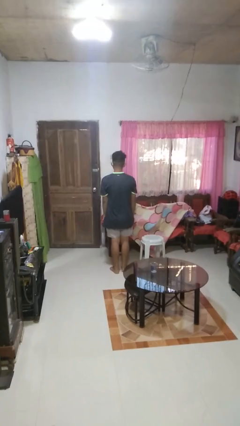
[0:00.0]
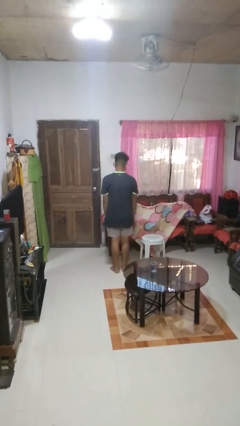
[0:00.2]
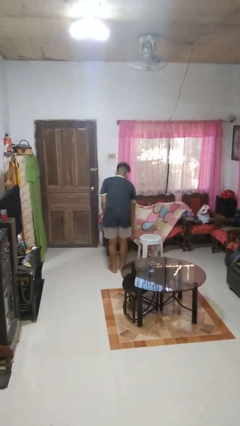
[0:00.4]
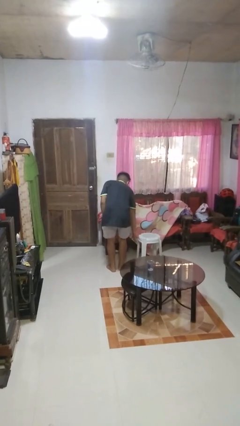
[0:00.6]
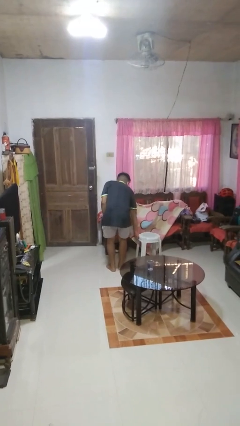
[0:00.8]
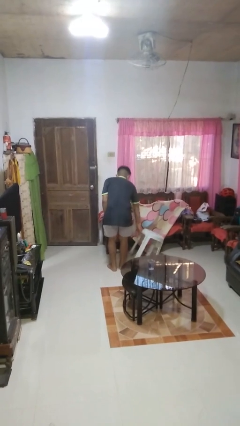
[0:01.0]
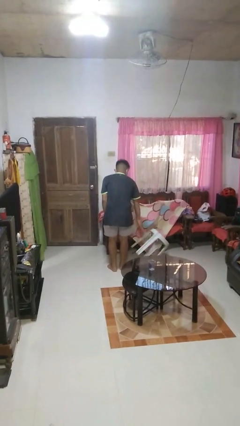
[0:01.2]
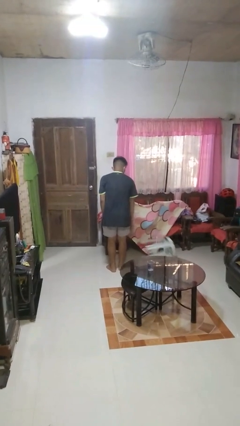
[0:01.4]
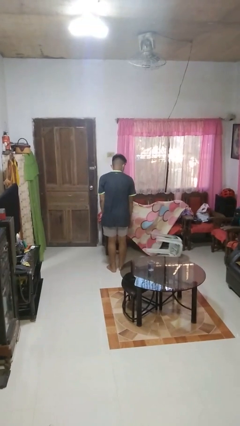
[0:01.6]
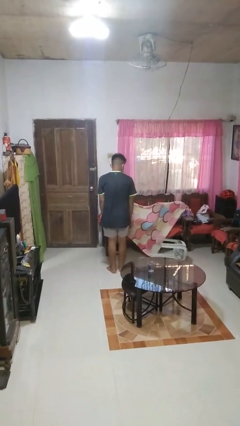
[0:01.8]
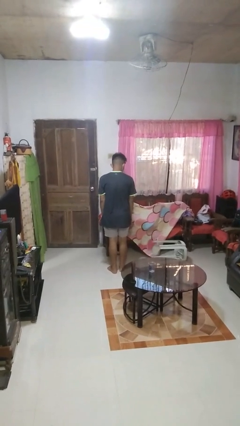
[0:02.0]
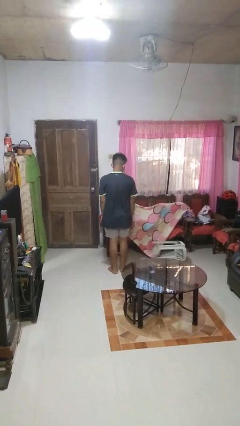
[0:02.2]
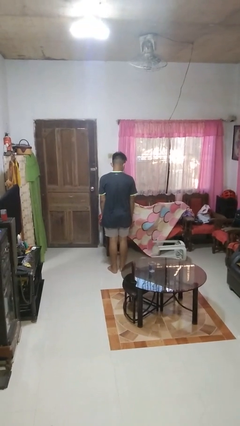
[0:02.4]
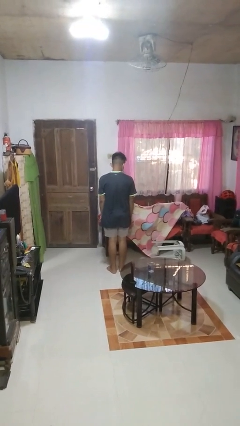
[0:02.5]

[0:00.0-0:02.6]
person knocks over furniture

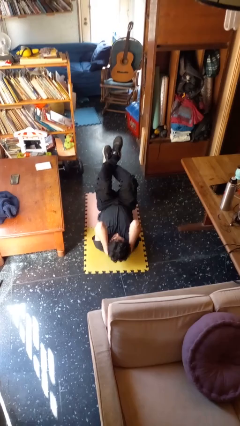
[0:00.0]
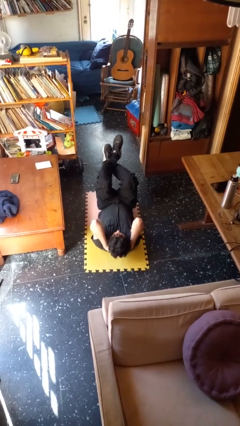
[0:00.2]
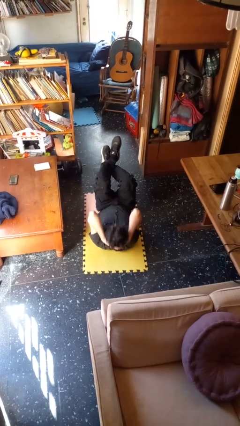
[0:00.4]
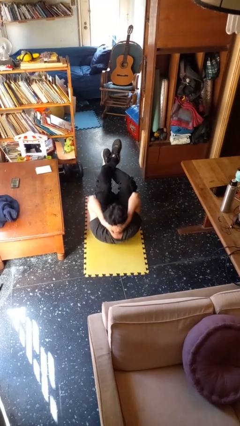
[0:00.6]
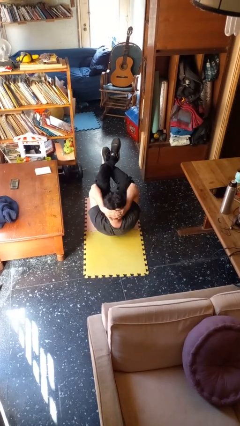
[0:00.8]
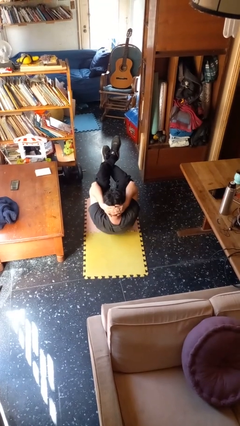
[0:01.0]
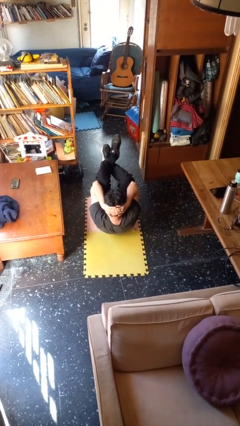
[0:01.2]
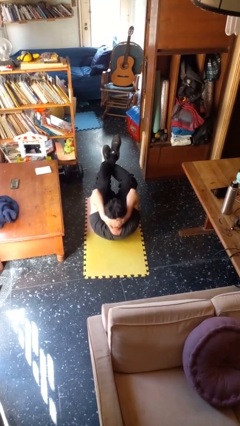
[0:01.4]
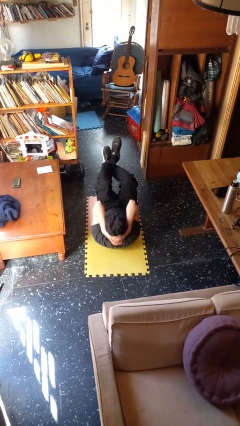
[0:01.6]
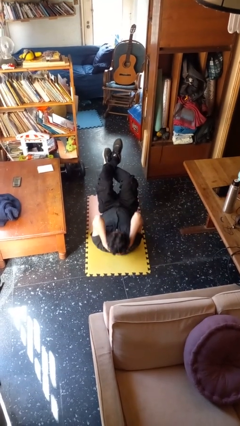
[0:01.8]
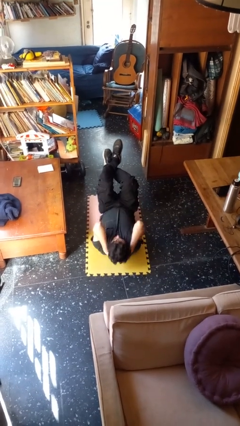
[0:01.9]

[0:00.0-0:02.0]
person exercises with situp

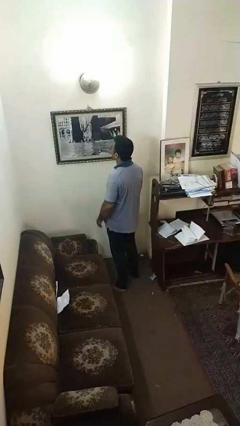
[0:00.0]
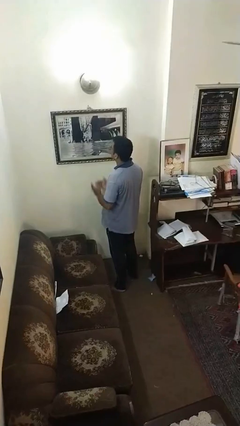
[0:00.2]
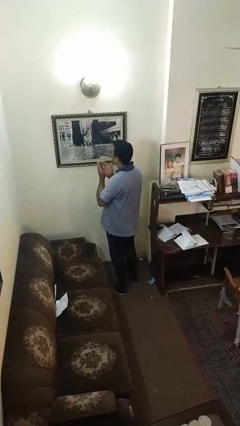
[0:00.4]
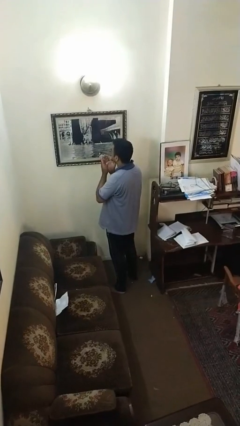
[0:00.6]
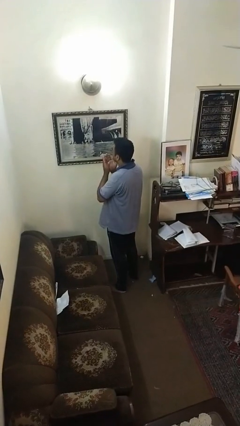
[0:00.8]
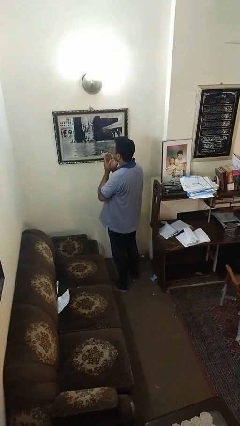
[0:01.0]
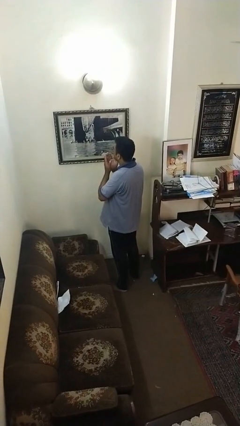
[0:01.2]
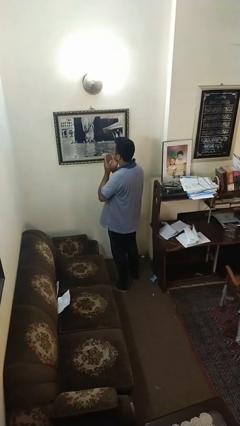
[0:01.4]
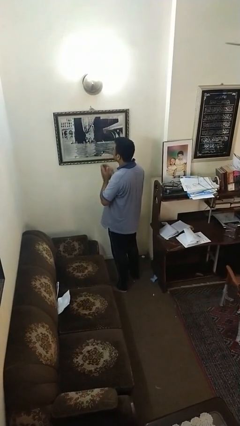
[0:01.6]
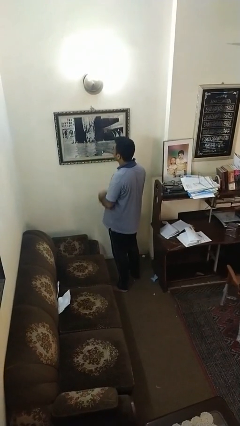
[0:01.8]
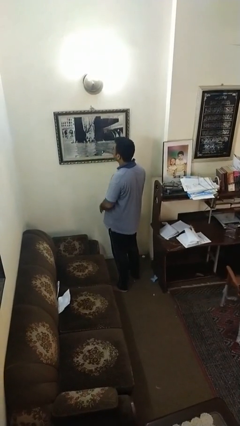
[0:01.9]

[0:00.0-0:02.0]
person prays

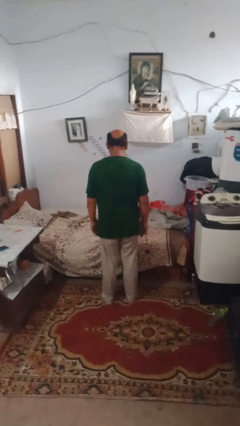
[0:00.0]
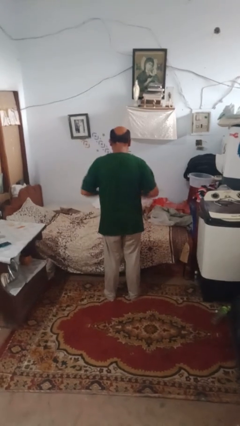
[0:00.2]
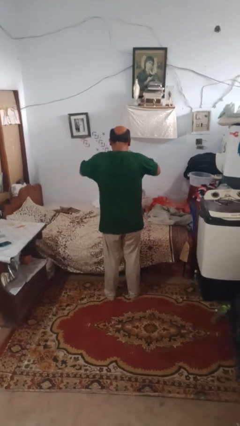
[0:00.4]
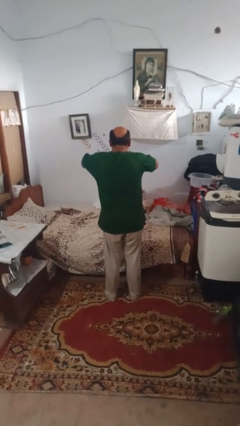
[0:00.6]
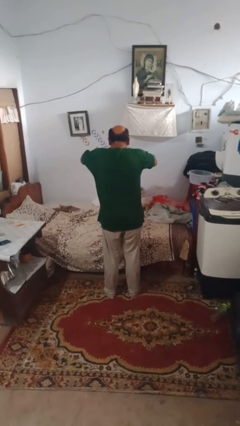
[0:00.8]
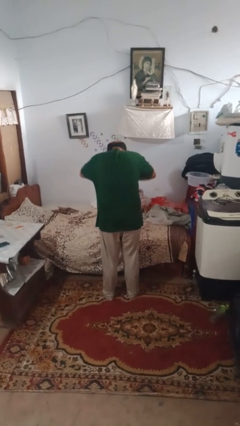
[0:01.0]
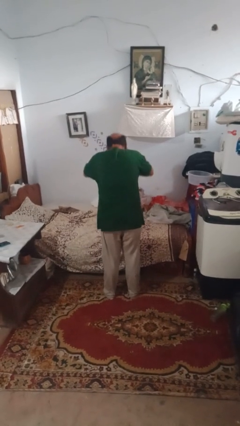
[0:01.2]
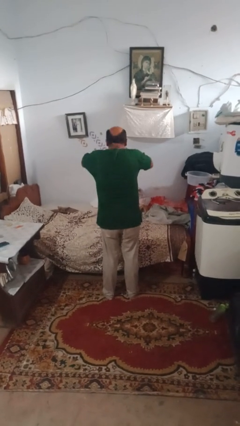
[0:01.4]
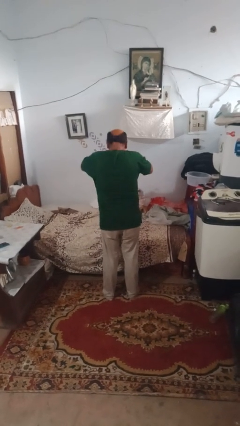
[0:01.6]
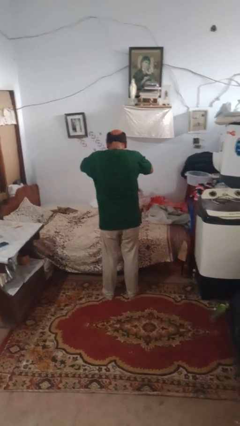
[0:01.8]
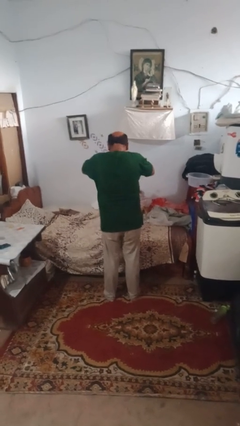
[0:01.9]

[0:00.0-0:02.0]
person sneezes into hand

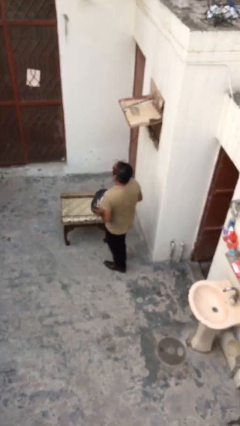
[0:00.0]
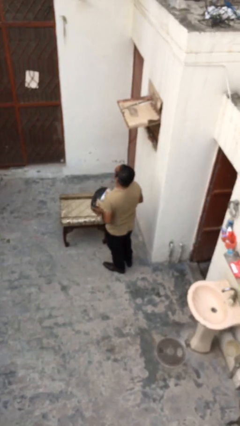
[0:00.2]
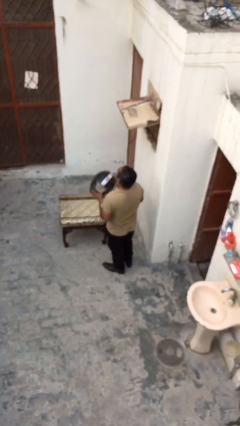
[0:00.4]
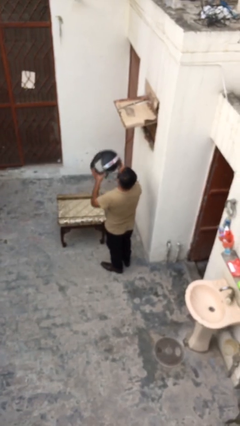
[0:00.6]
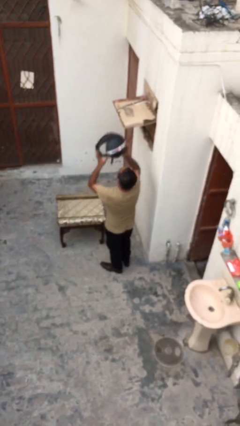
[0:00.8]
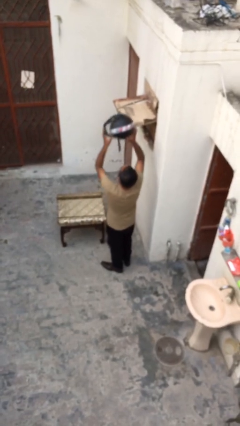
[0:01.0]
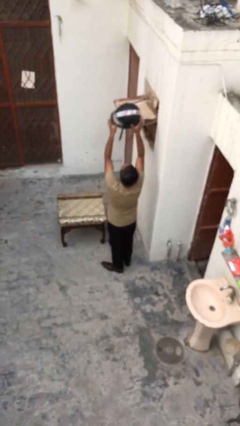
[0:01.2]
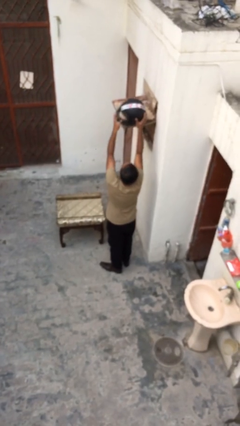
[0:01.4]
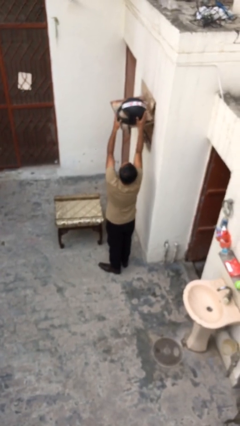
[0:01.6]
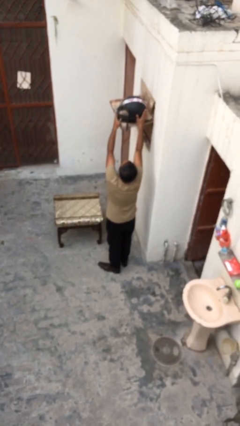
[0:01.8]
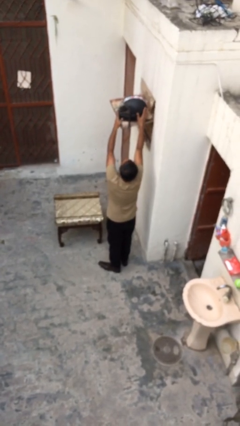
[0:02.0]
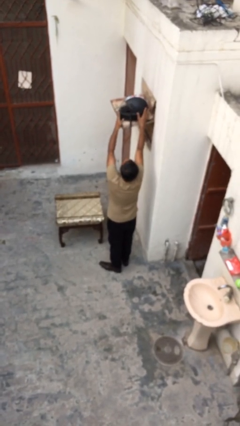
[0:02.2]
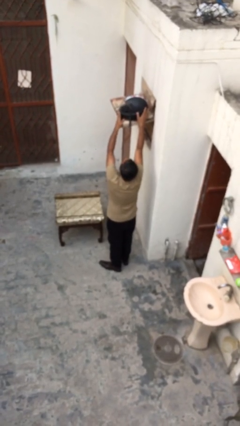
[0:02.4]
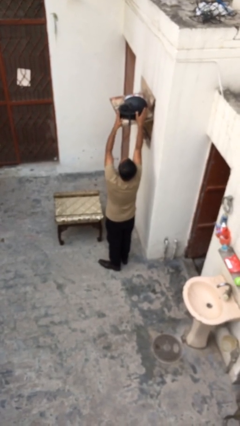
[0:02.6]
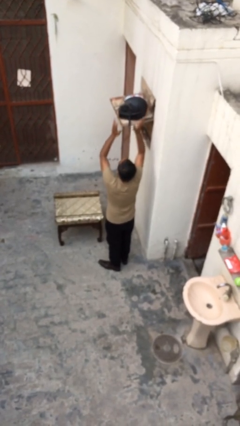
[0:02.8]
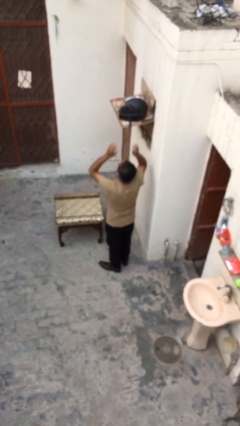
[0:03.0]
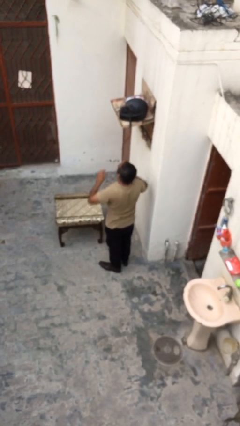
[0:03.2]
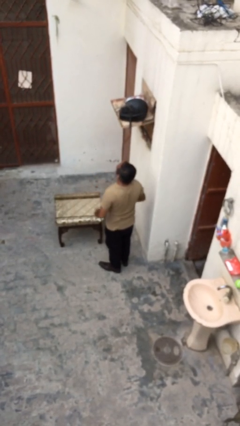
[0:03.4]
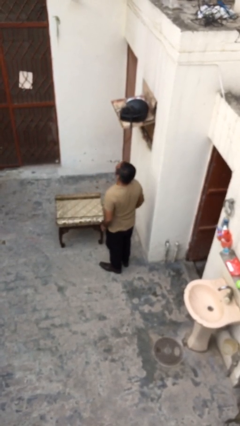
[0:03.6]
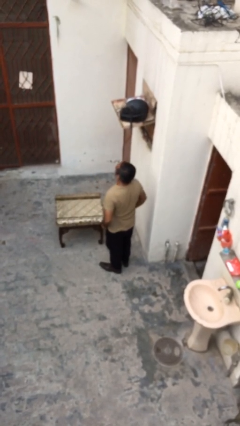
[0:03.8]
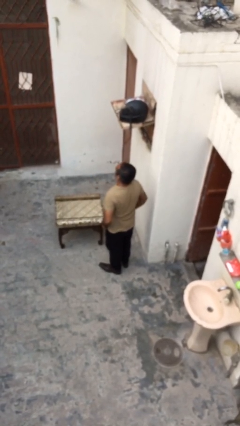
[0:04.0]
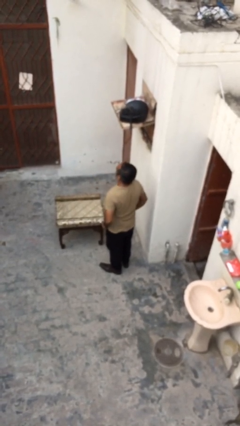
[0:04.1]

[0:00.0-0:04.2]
person puts down object on shelf

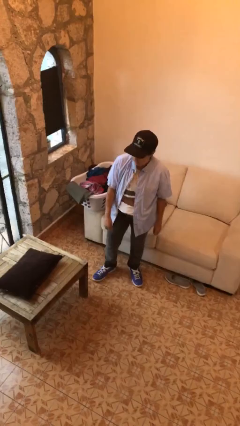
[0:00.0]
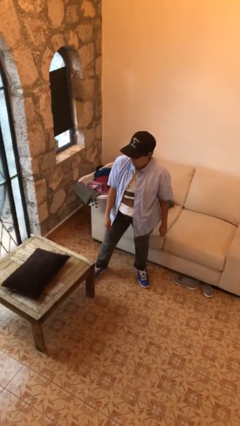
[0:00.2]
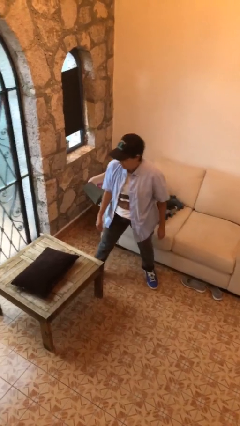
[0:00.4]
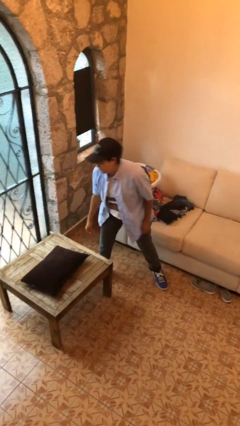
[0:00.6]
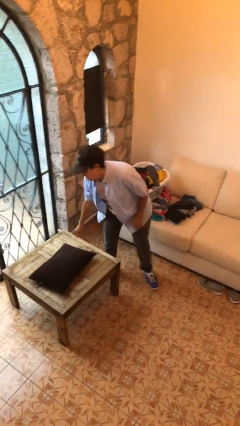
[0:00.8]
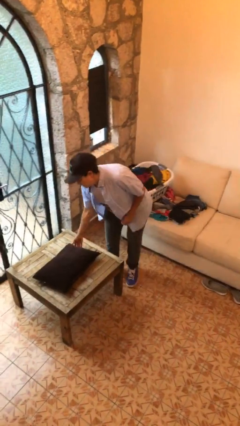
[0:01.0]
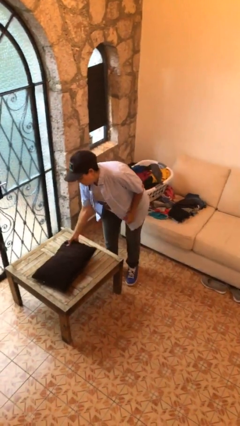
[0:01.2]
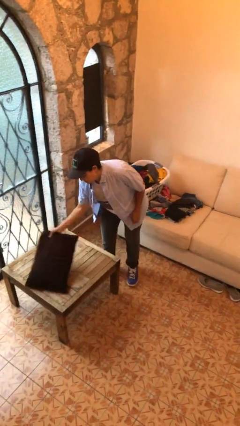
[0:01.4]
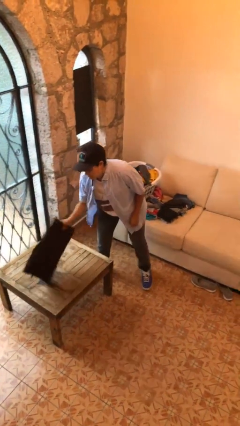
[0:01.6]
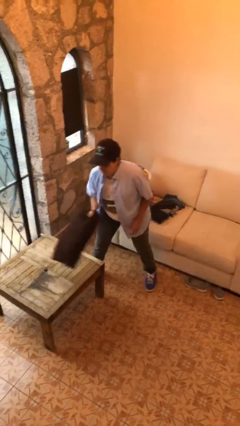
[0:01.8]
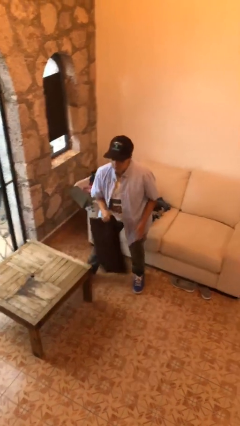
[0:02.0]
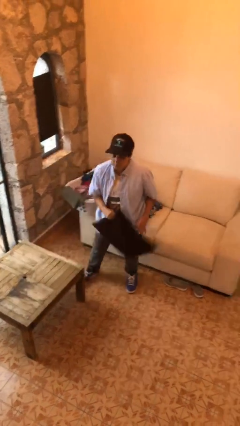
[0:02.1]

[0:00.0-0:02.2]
person picks up object from table

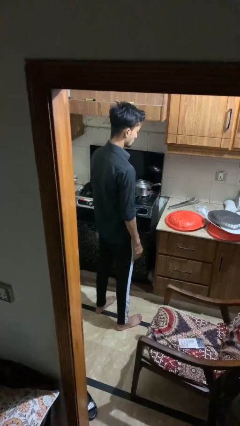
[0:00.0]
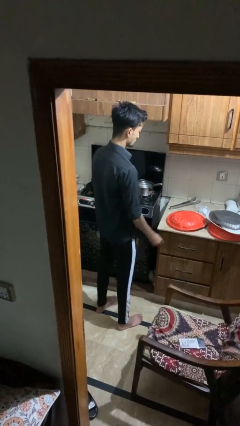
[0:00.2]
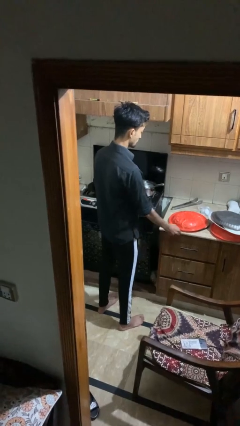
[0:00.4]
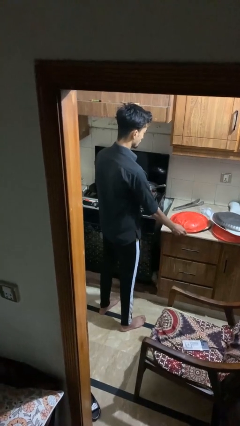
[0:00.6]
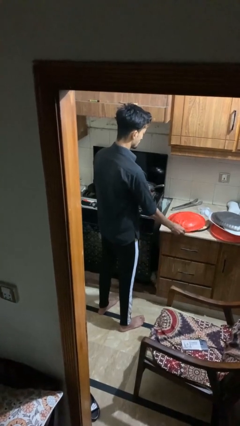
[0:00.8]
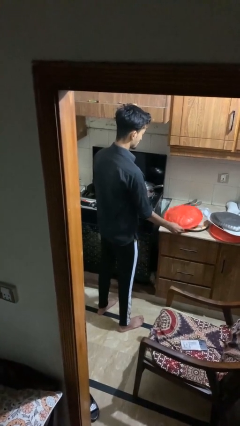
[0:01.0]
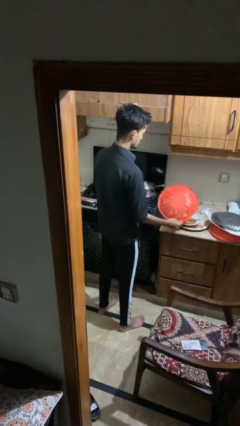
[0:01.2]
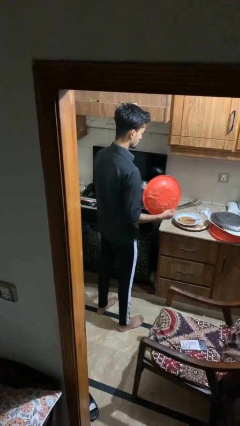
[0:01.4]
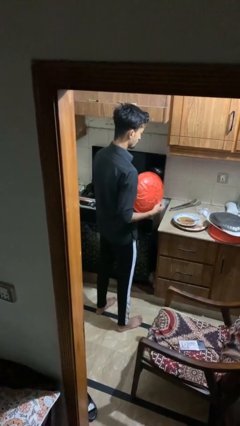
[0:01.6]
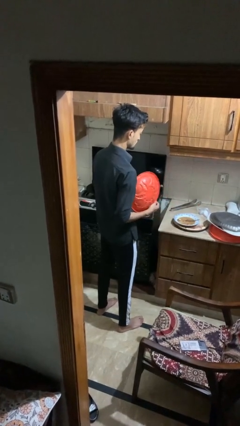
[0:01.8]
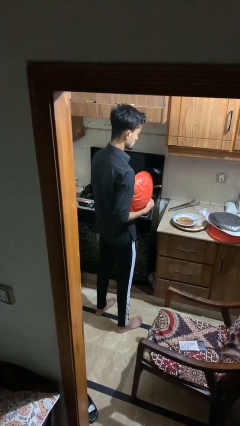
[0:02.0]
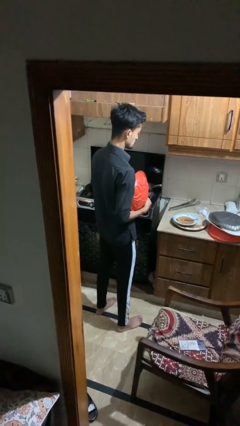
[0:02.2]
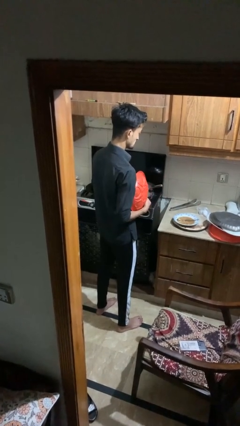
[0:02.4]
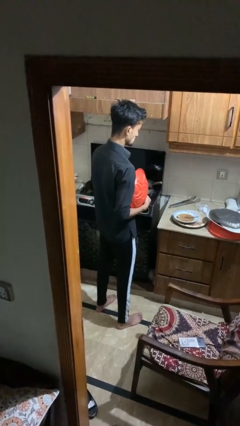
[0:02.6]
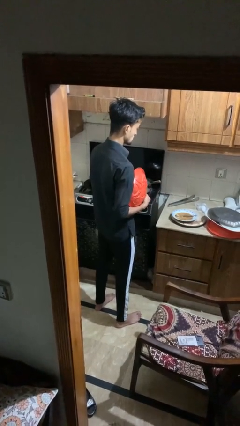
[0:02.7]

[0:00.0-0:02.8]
person picks up object from shelf
